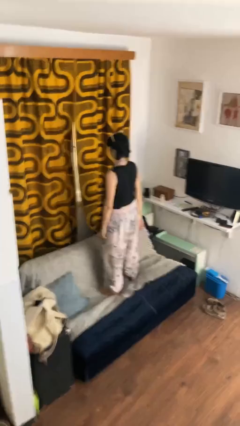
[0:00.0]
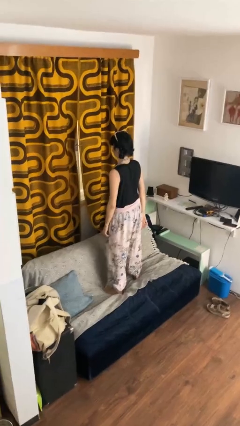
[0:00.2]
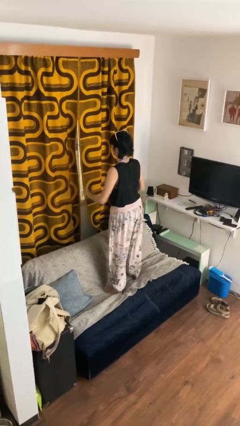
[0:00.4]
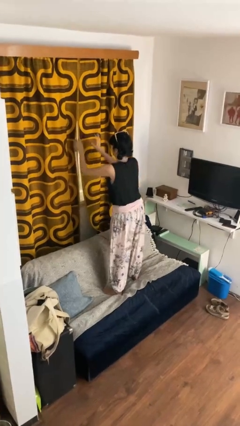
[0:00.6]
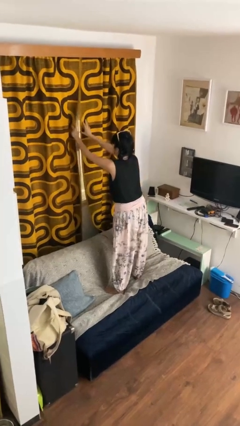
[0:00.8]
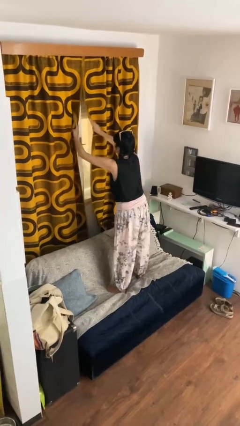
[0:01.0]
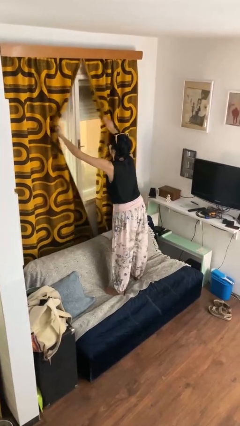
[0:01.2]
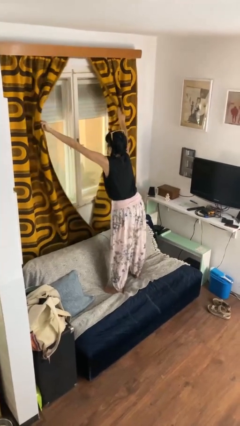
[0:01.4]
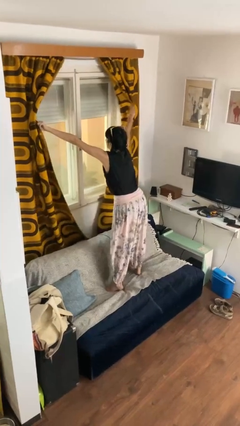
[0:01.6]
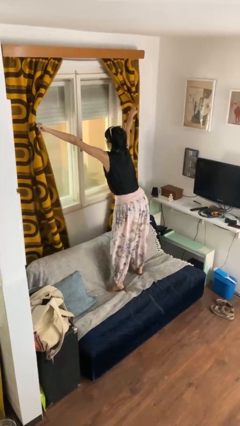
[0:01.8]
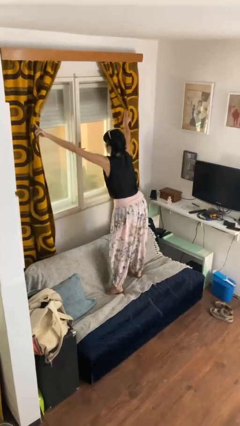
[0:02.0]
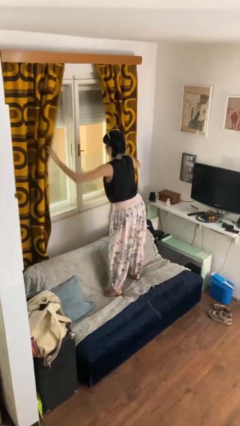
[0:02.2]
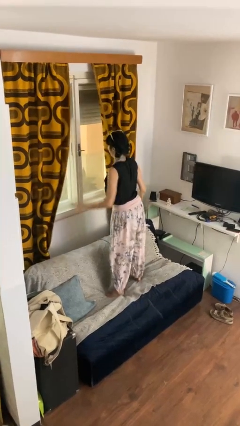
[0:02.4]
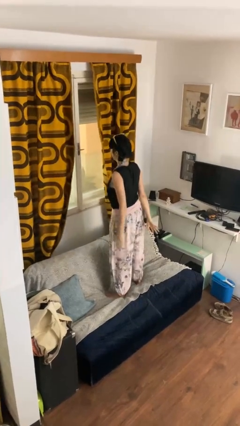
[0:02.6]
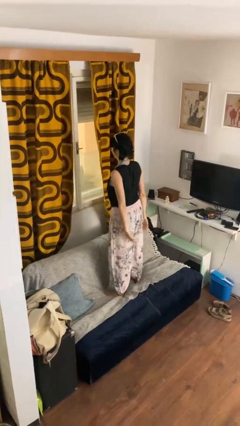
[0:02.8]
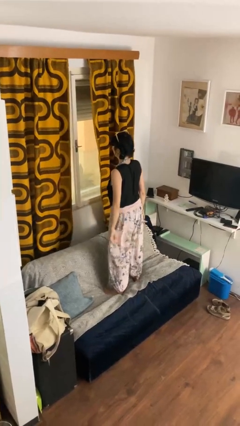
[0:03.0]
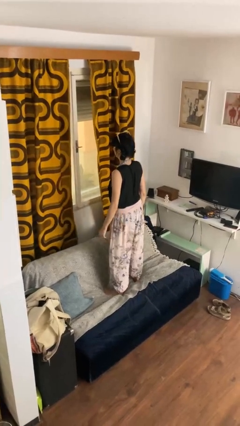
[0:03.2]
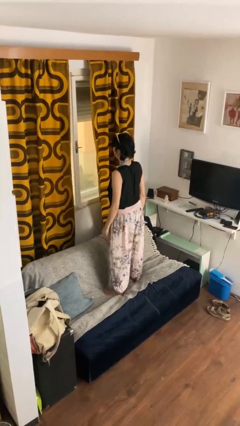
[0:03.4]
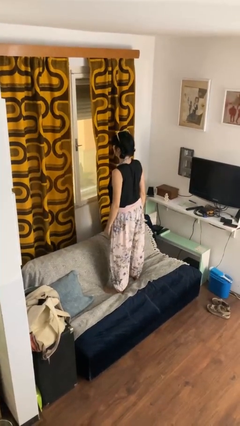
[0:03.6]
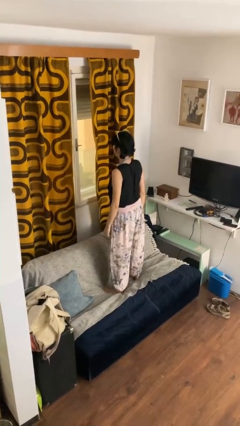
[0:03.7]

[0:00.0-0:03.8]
person opens curtains

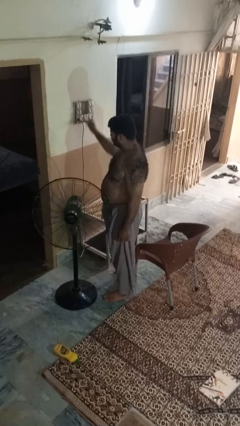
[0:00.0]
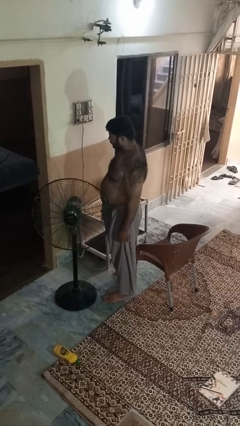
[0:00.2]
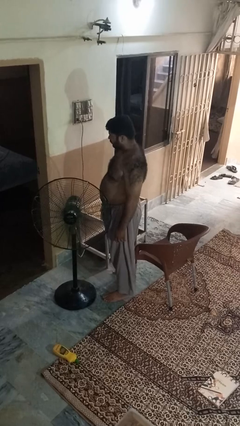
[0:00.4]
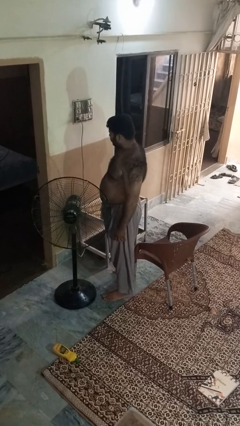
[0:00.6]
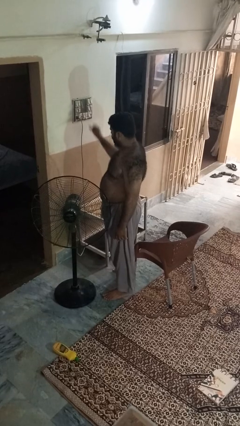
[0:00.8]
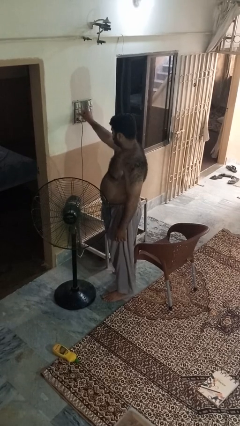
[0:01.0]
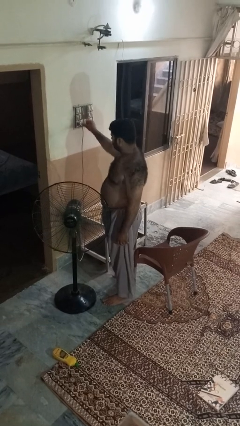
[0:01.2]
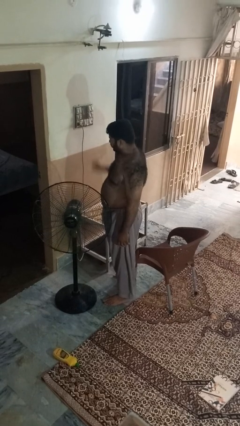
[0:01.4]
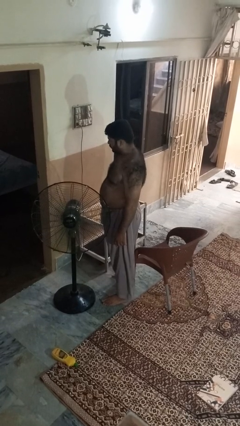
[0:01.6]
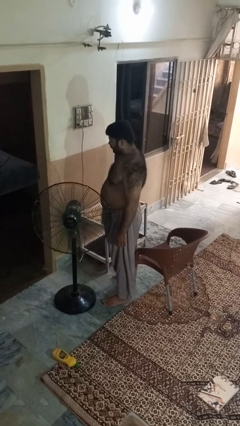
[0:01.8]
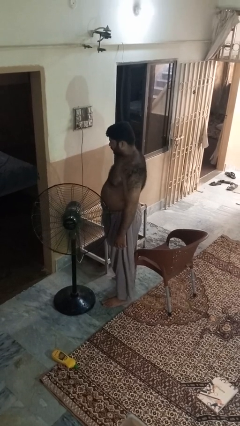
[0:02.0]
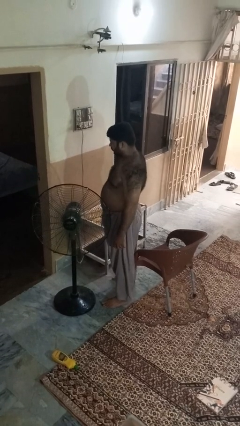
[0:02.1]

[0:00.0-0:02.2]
person turns on fan

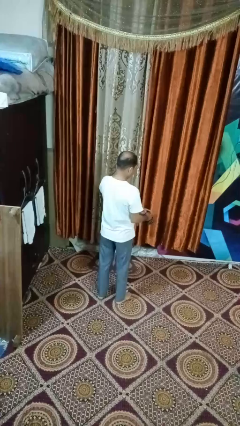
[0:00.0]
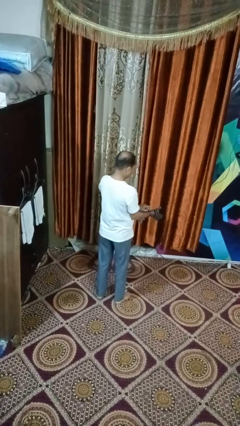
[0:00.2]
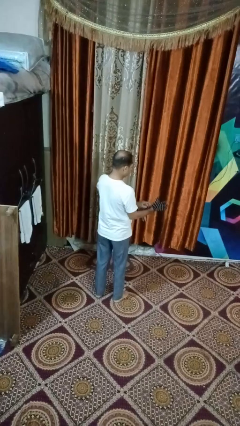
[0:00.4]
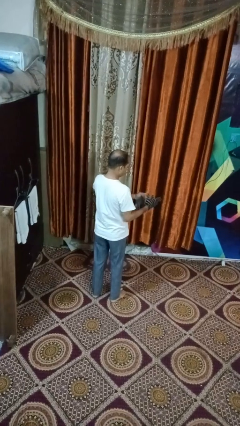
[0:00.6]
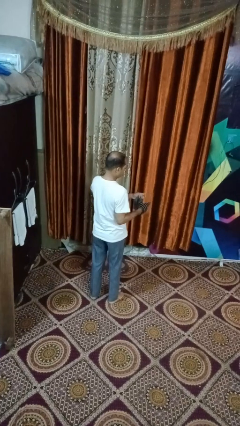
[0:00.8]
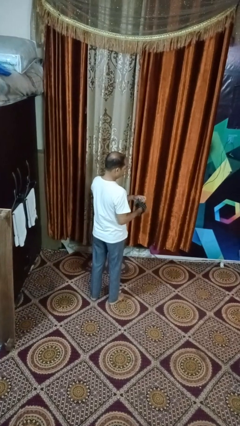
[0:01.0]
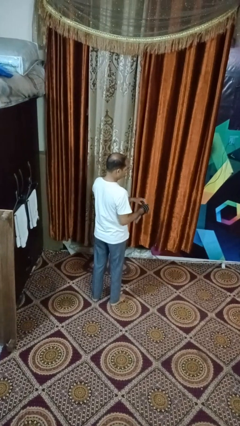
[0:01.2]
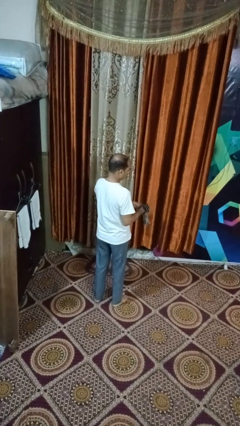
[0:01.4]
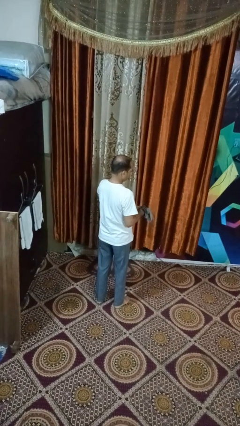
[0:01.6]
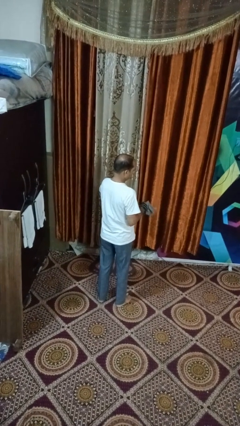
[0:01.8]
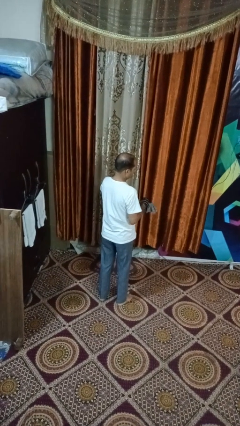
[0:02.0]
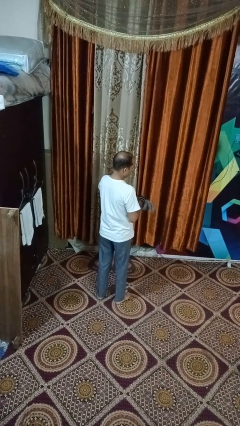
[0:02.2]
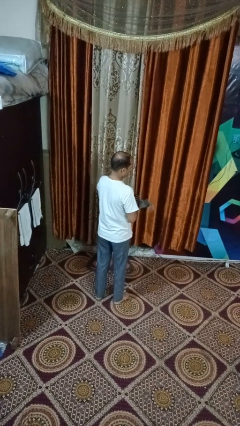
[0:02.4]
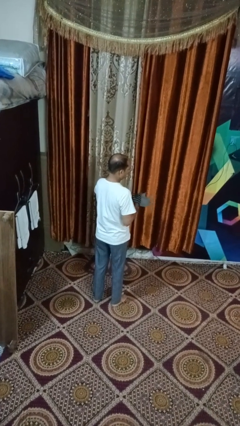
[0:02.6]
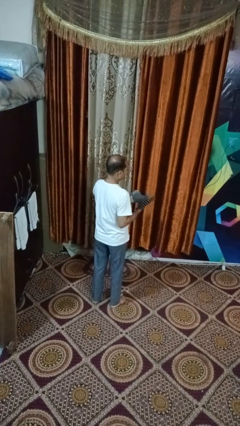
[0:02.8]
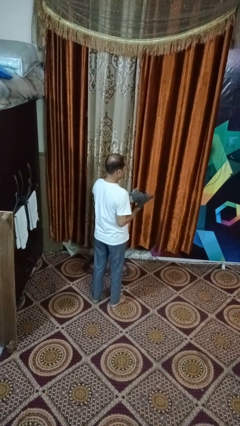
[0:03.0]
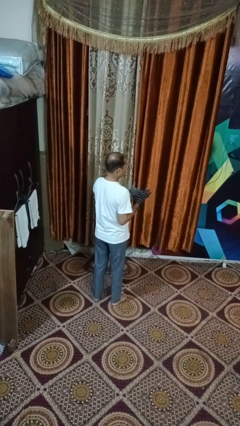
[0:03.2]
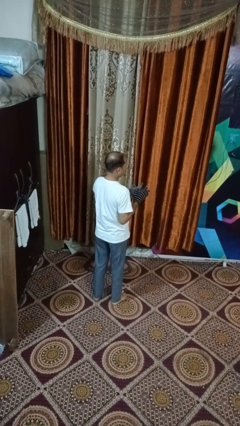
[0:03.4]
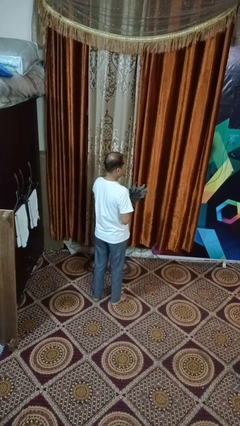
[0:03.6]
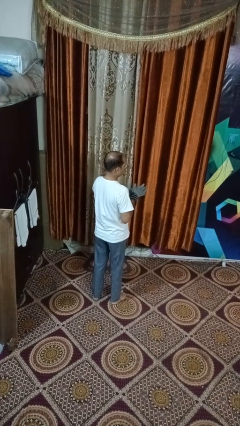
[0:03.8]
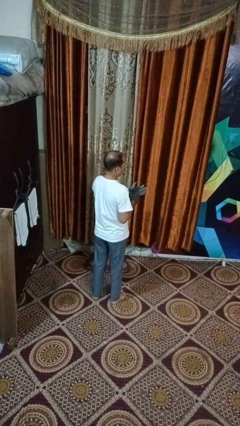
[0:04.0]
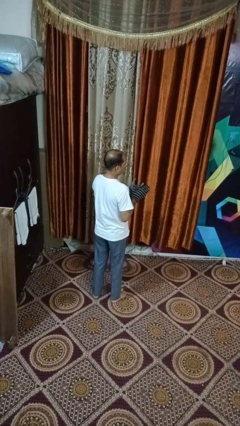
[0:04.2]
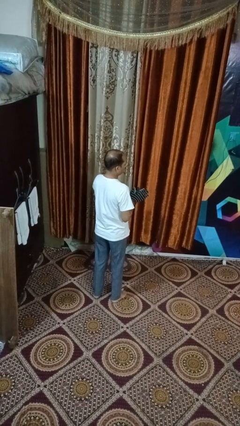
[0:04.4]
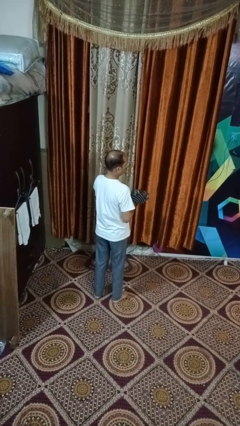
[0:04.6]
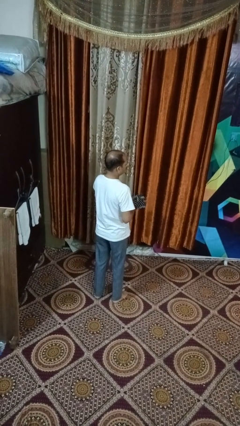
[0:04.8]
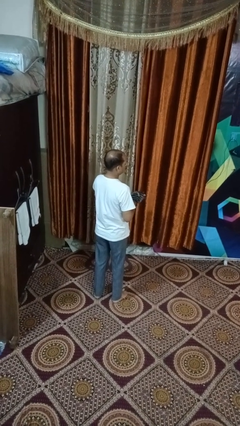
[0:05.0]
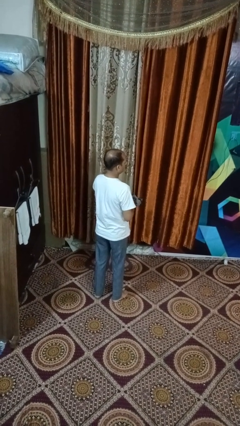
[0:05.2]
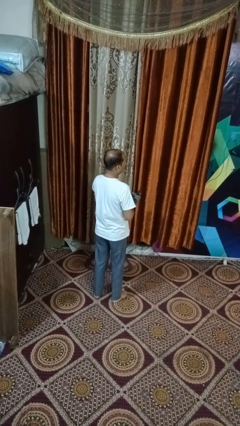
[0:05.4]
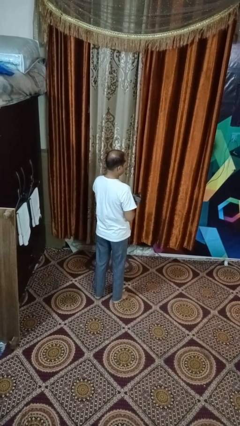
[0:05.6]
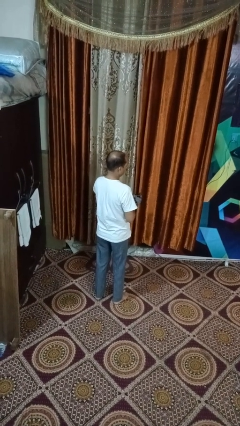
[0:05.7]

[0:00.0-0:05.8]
person puts on gloves

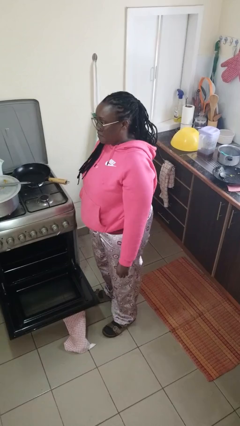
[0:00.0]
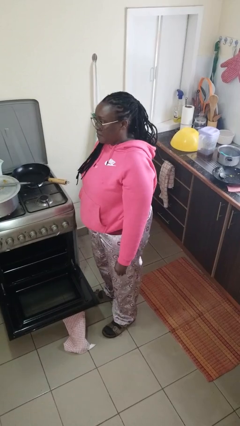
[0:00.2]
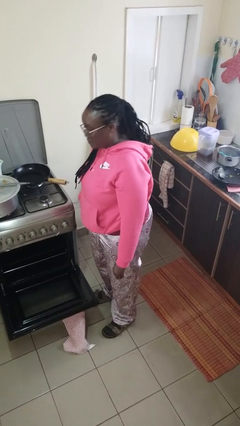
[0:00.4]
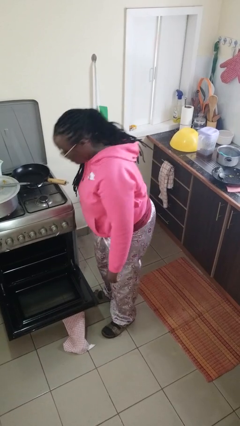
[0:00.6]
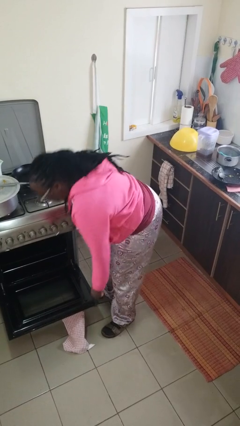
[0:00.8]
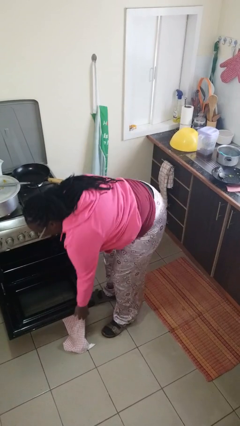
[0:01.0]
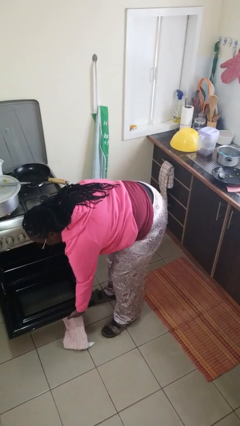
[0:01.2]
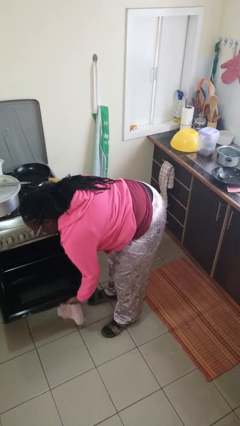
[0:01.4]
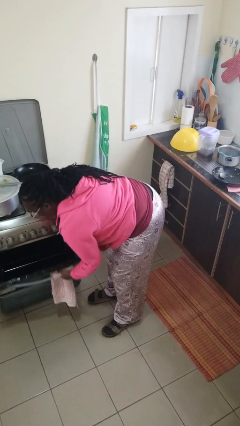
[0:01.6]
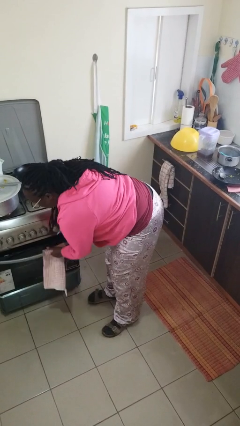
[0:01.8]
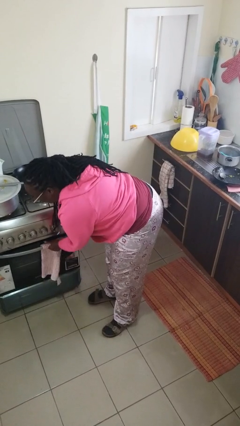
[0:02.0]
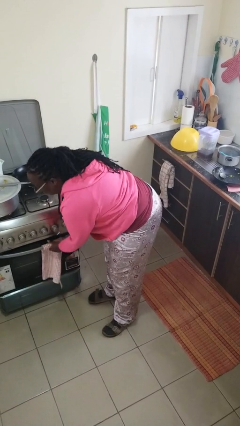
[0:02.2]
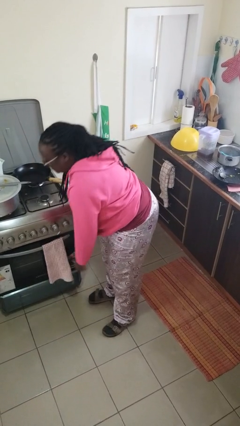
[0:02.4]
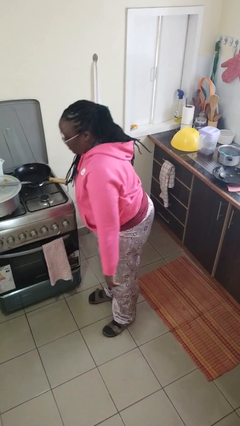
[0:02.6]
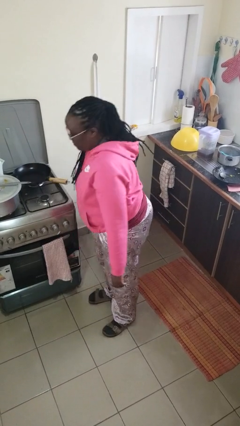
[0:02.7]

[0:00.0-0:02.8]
person closes oven door

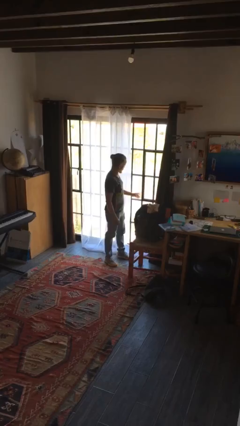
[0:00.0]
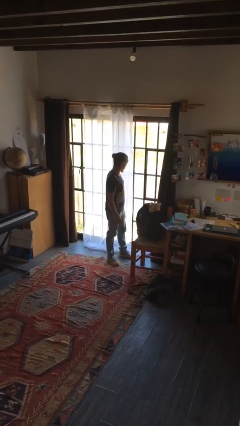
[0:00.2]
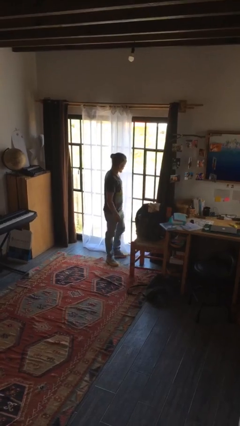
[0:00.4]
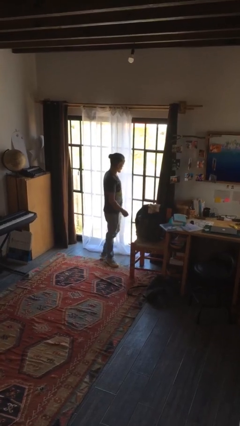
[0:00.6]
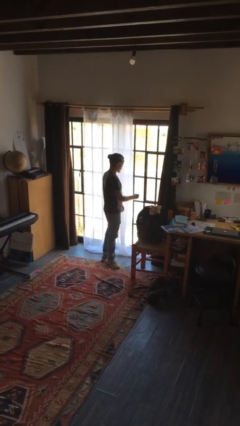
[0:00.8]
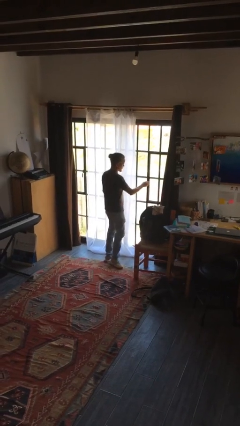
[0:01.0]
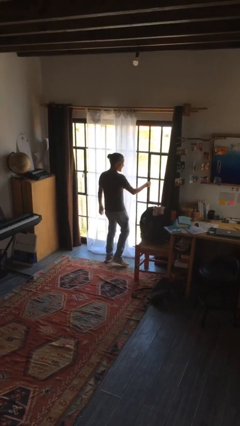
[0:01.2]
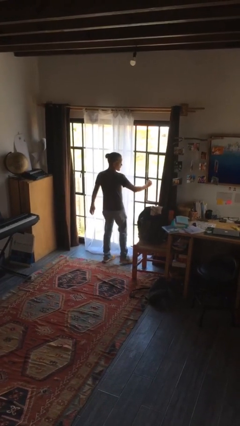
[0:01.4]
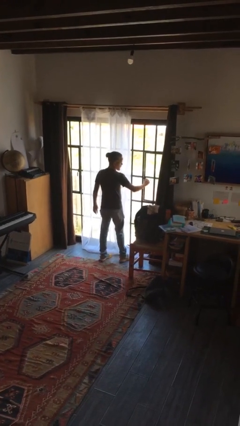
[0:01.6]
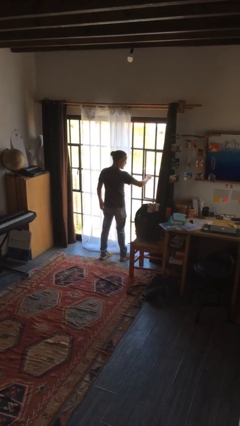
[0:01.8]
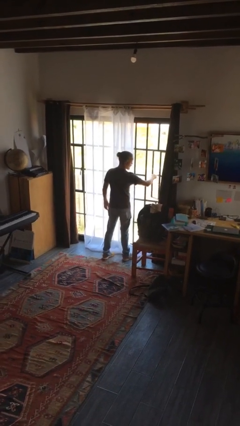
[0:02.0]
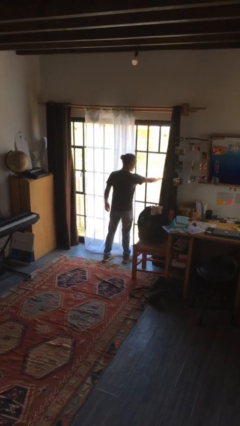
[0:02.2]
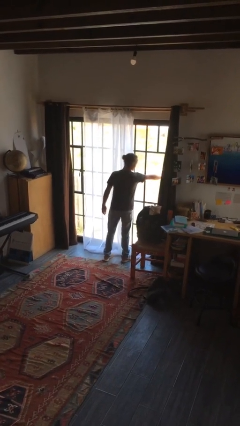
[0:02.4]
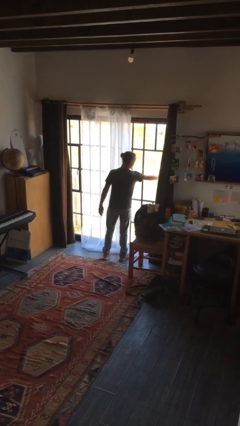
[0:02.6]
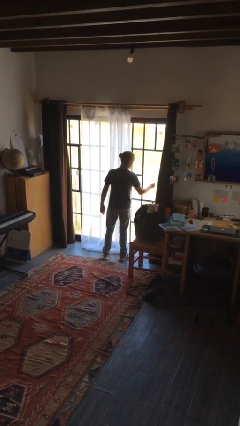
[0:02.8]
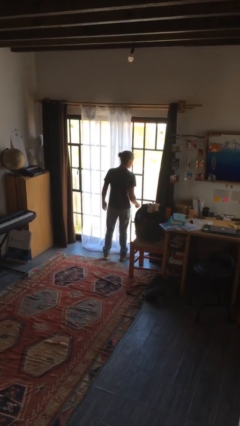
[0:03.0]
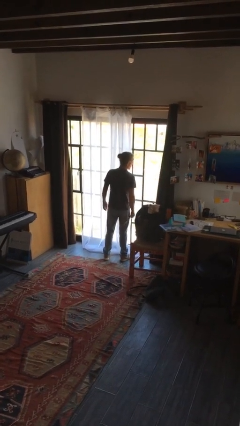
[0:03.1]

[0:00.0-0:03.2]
person opens home window
